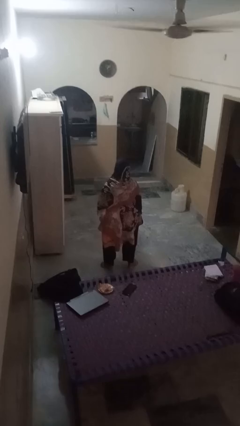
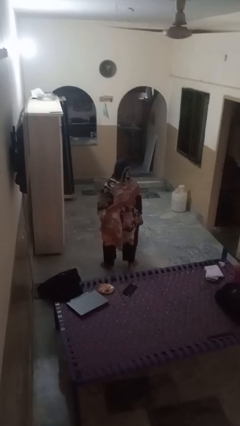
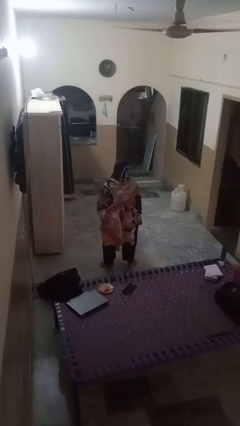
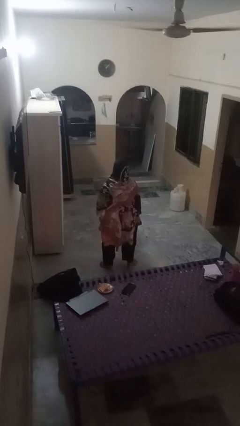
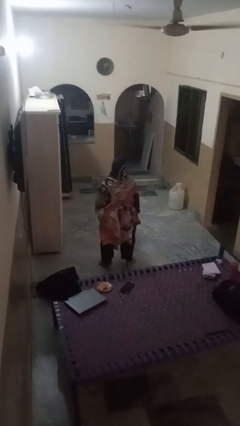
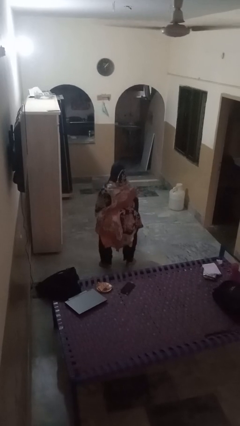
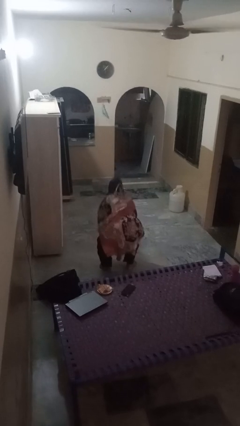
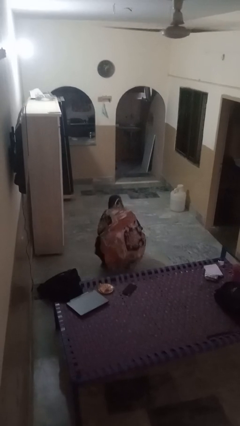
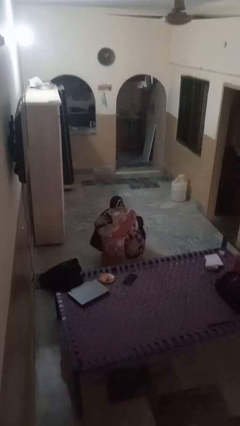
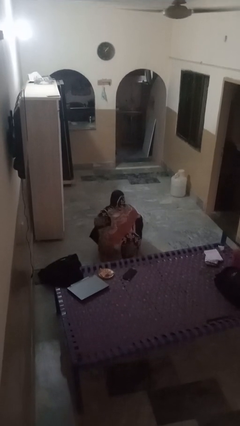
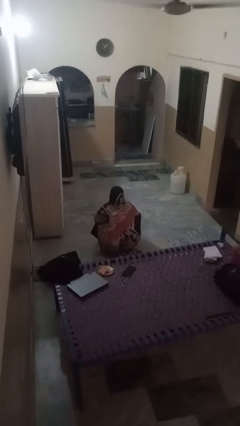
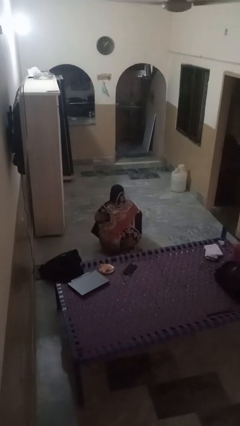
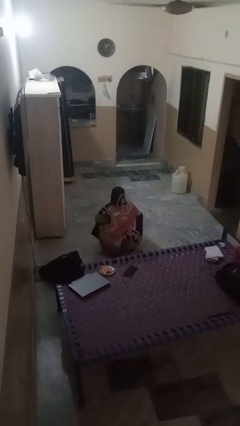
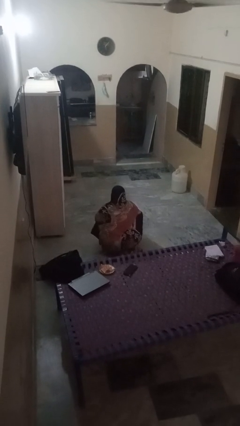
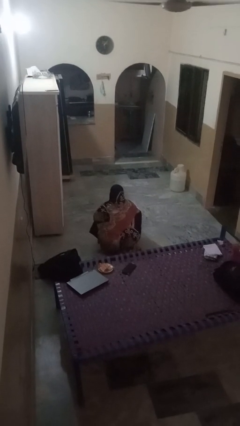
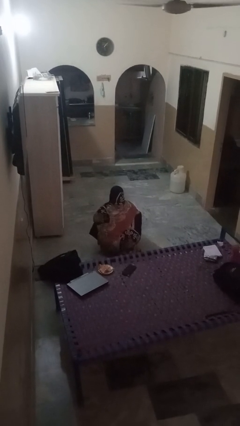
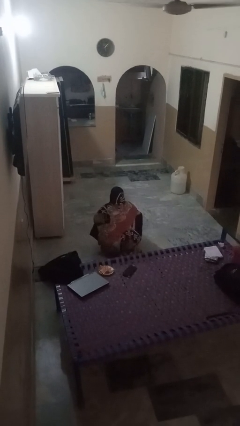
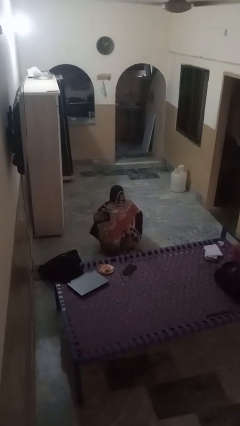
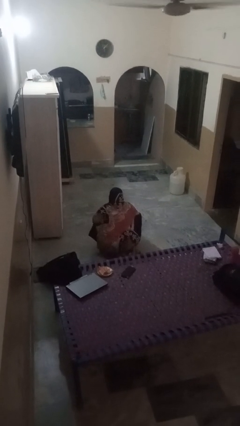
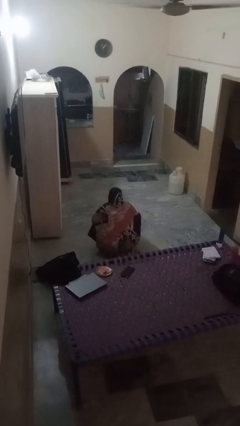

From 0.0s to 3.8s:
person squats

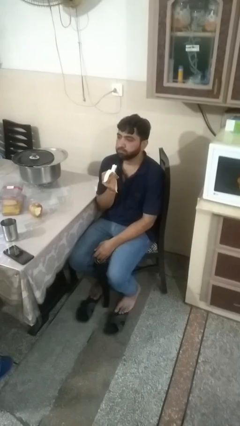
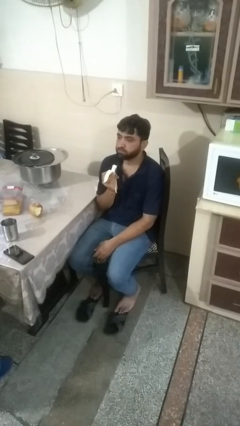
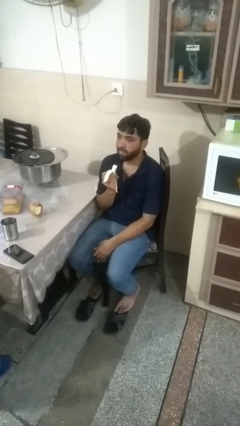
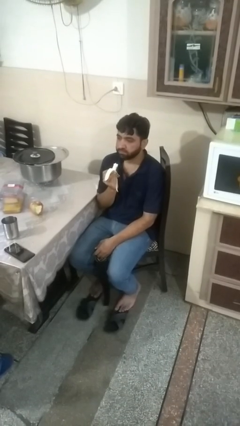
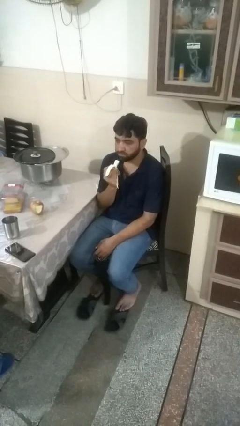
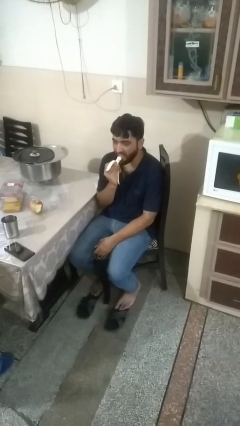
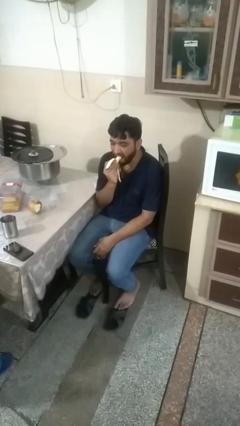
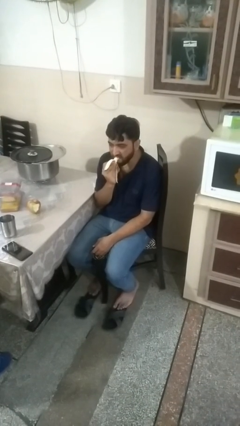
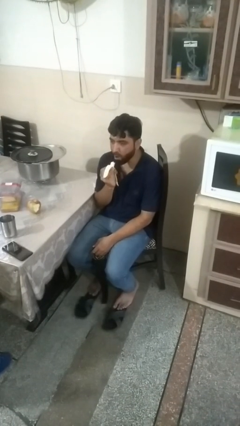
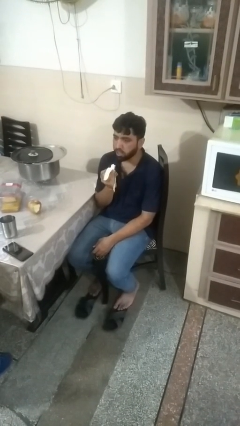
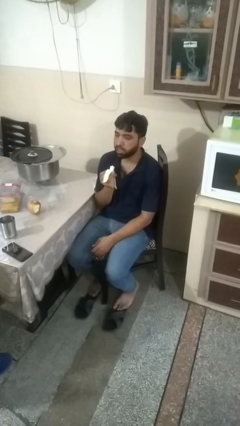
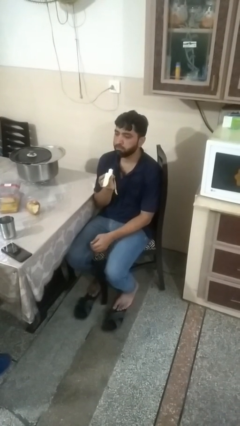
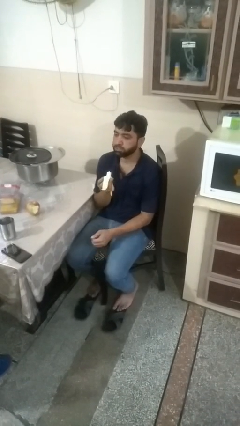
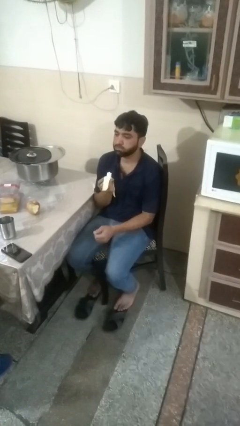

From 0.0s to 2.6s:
person eats banana

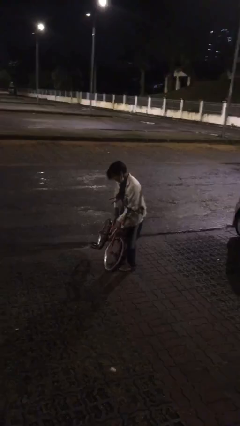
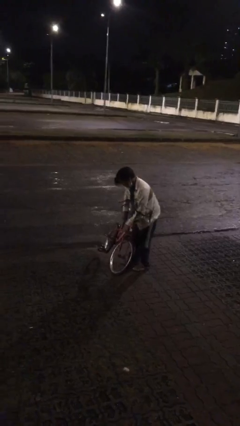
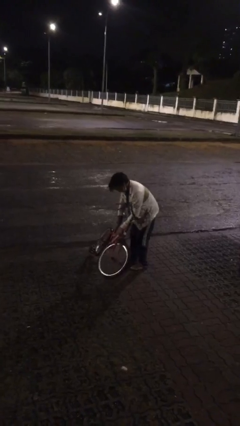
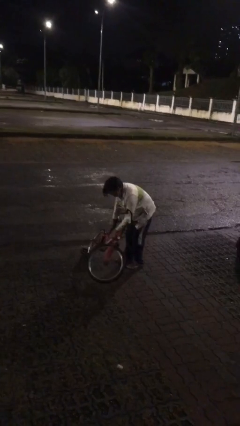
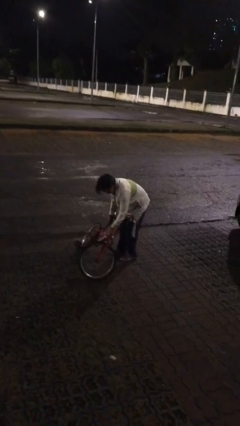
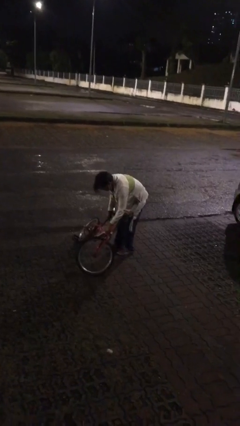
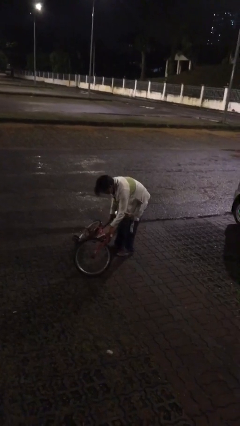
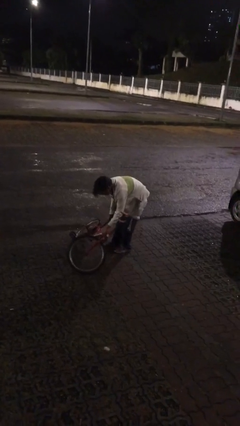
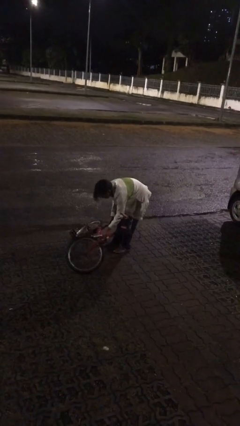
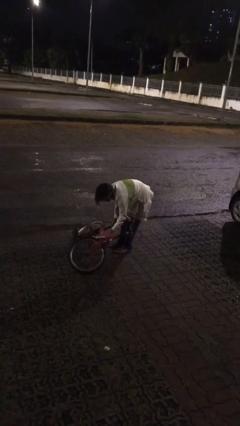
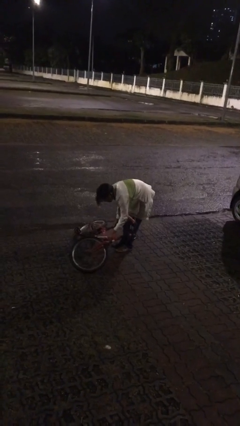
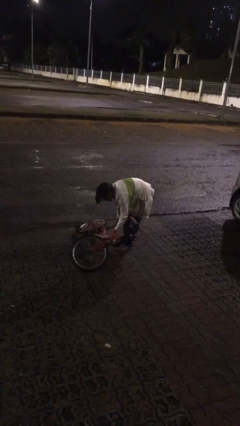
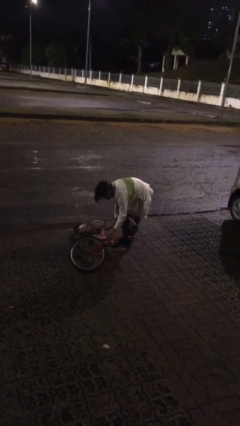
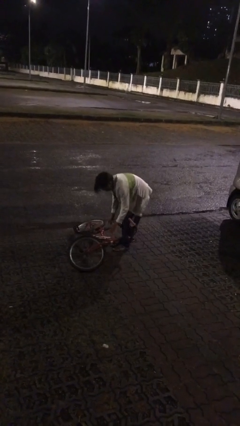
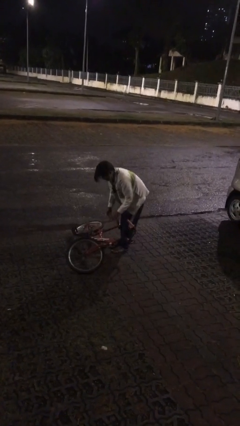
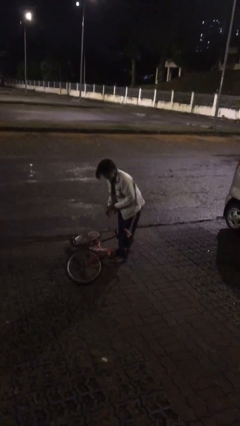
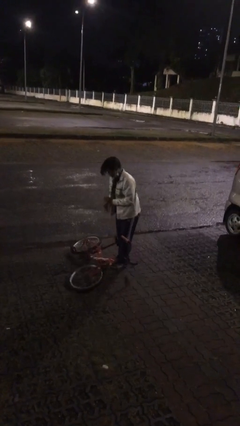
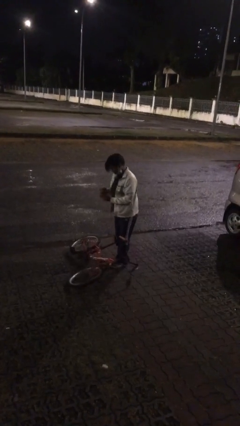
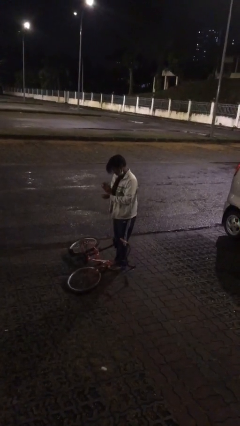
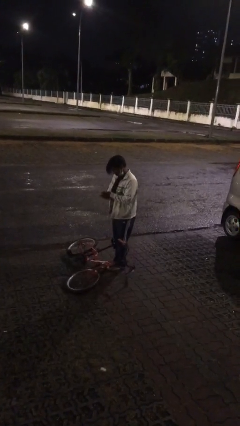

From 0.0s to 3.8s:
person puts down object on floor

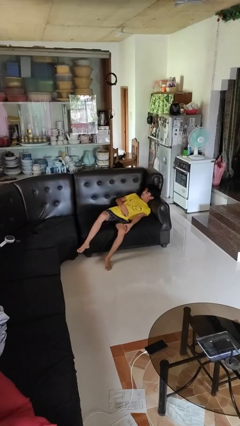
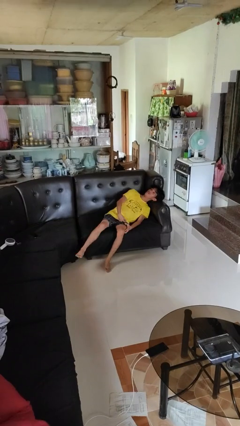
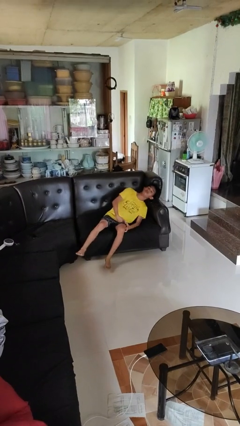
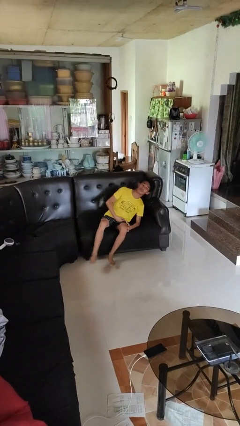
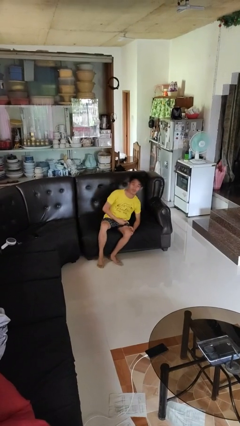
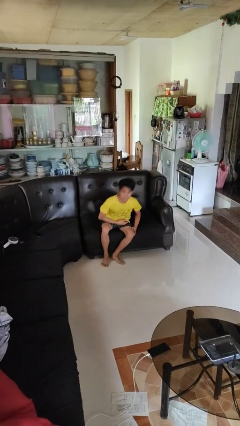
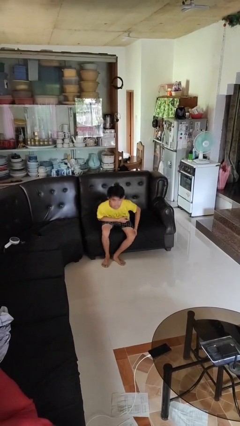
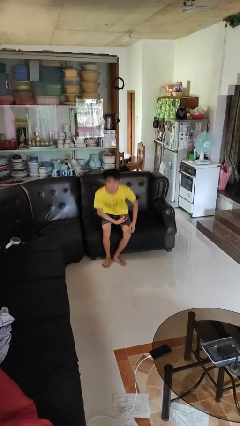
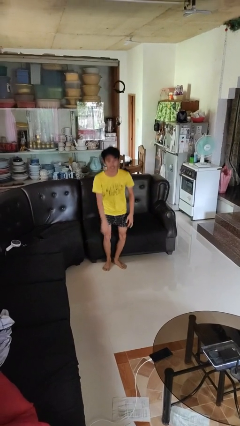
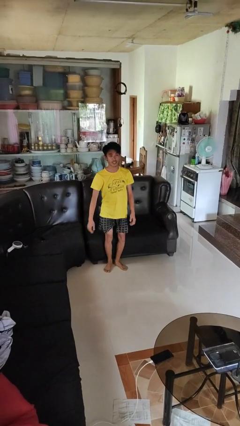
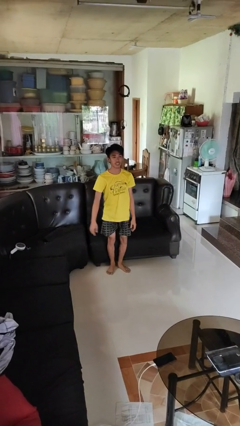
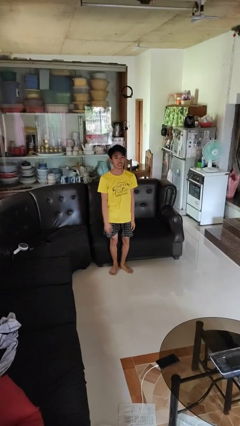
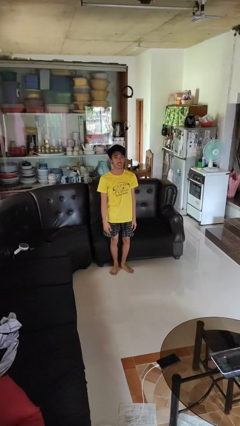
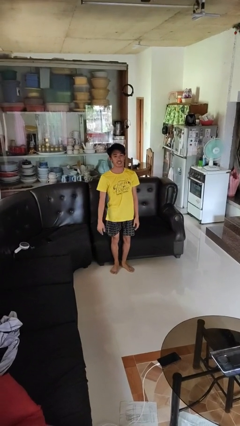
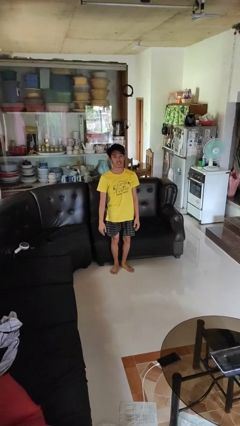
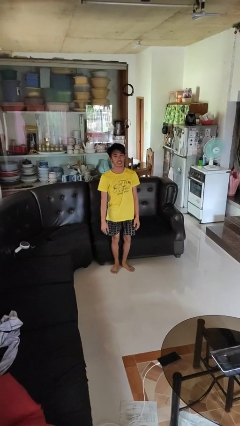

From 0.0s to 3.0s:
person stands up

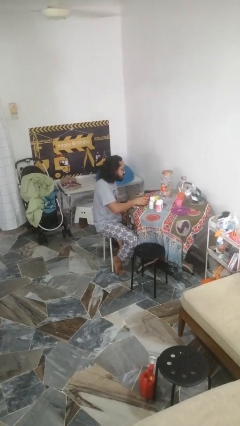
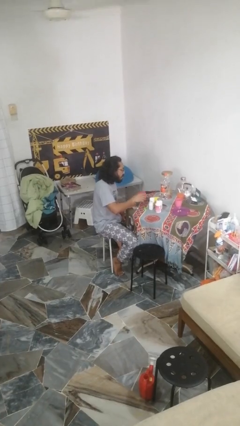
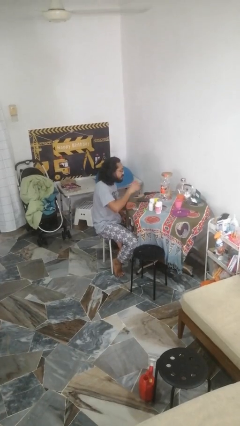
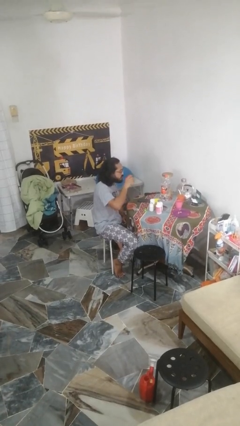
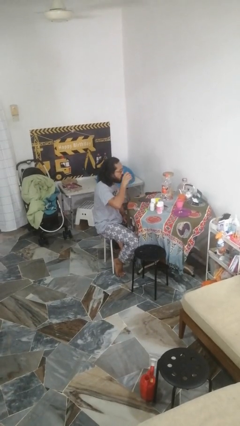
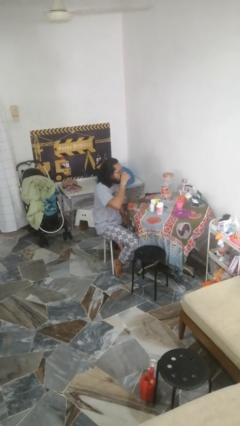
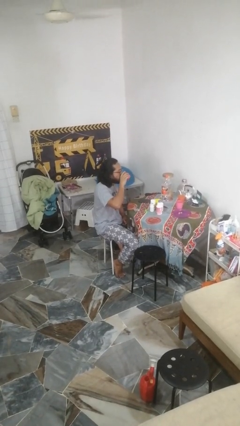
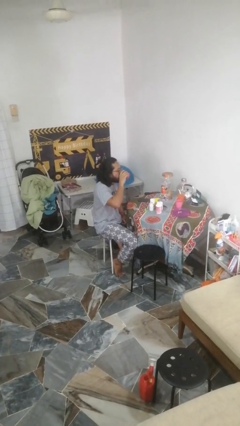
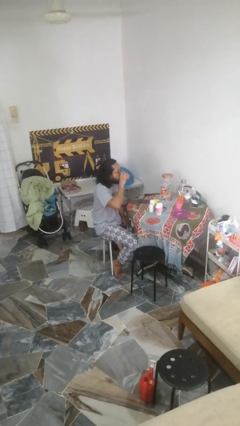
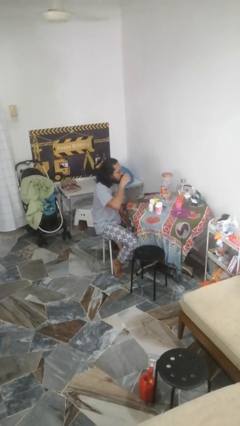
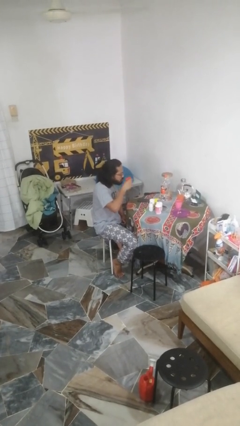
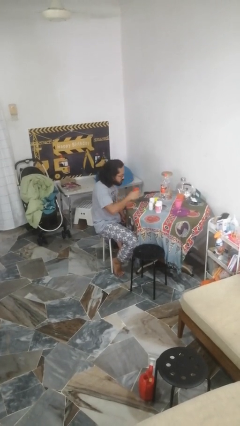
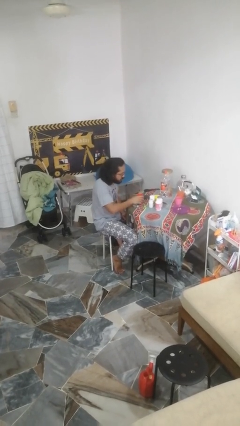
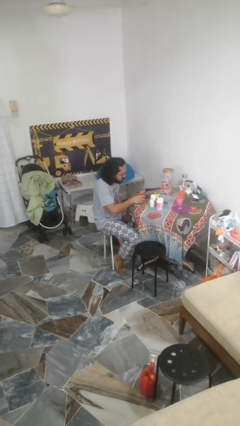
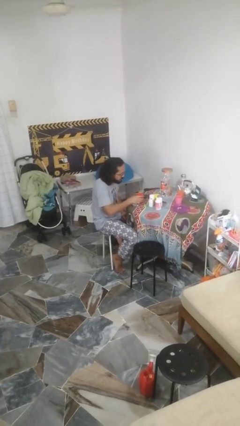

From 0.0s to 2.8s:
person drinks from cup

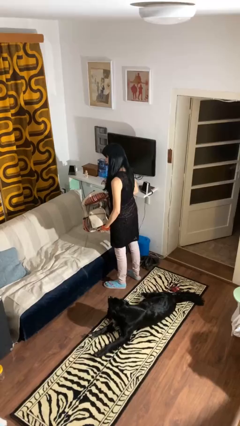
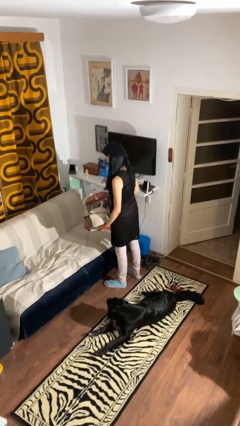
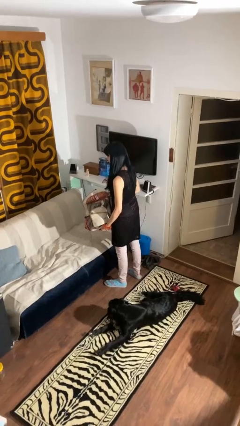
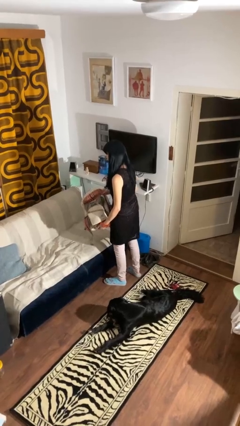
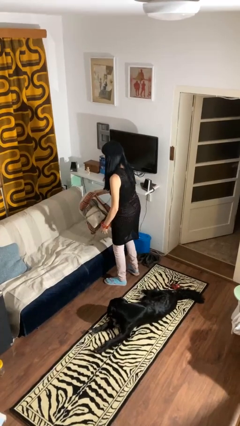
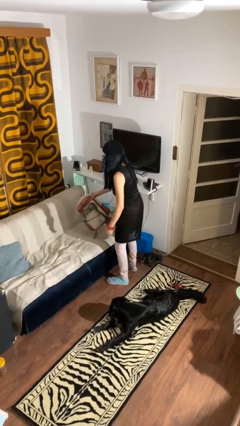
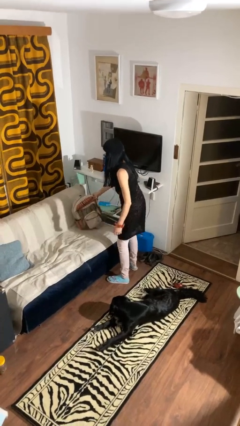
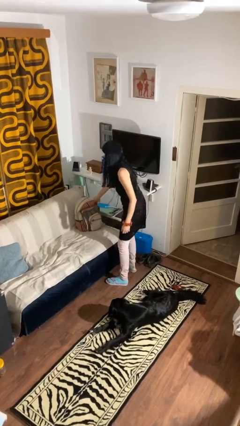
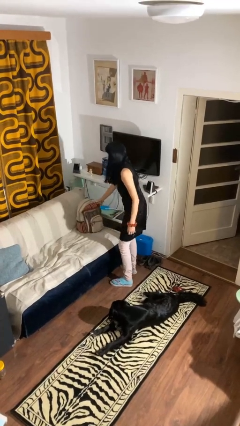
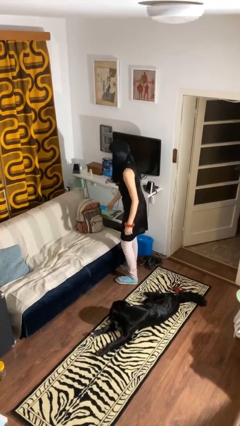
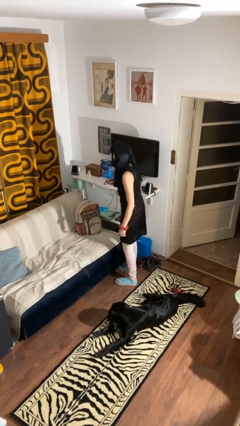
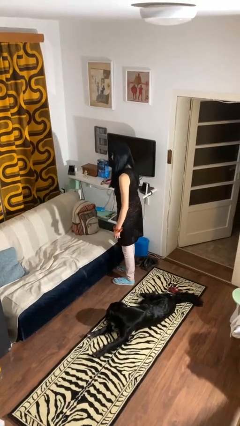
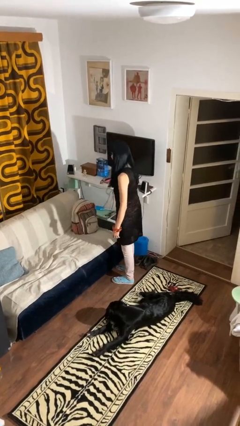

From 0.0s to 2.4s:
person puts down object on couch
